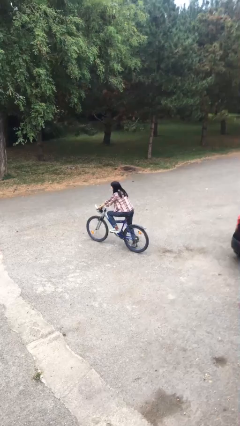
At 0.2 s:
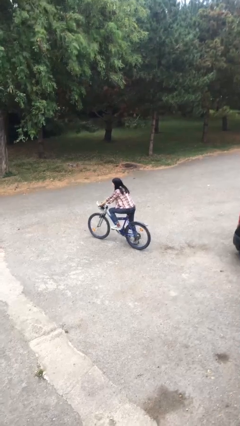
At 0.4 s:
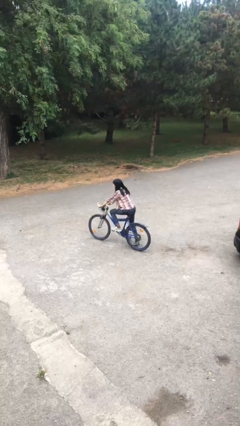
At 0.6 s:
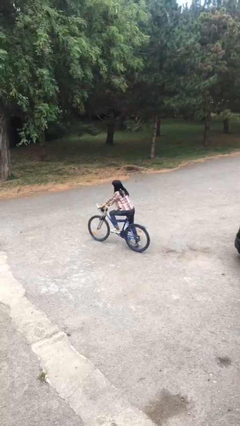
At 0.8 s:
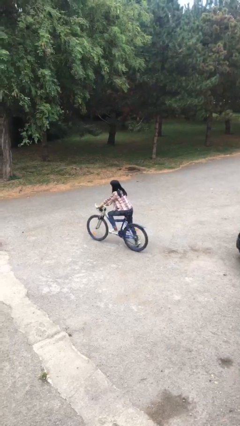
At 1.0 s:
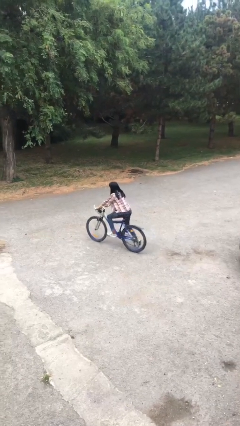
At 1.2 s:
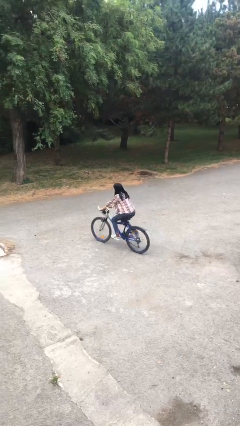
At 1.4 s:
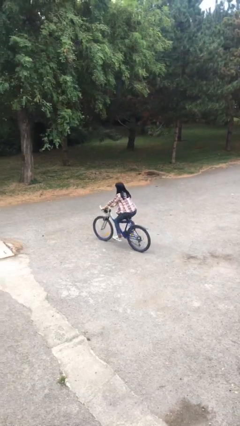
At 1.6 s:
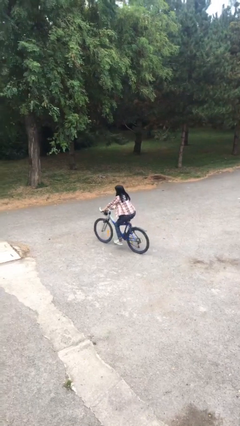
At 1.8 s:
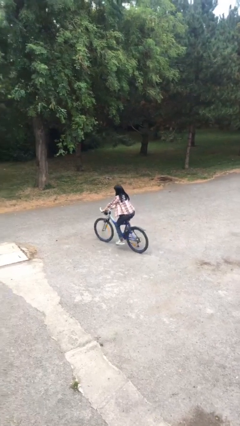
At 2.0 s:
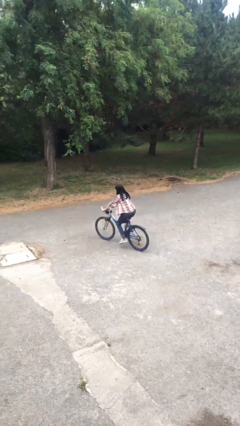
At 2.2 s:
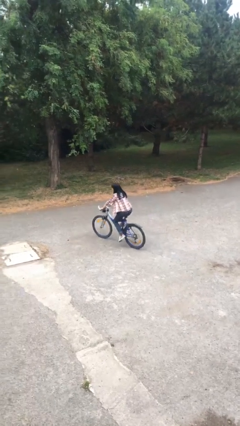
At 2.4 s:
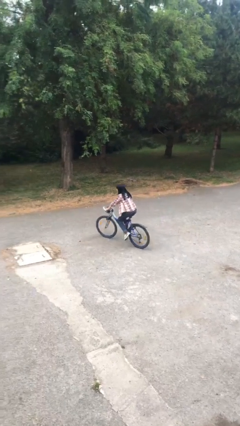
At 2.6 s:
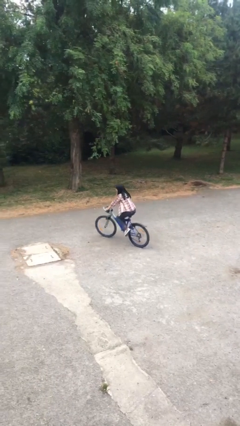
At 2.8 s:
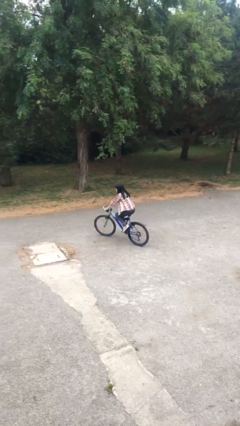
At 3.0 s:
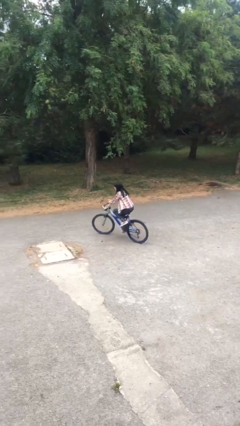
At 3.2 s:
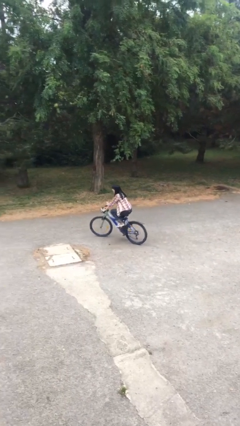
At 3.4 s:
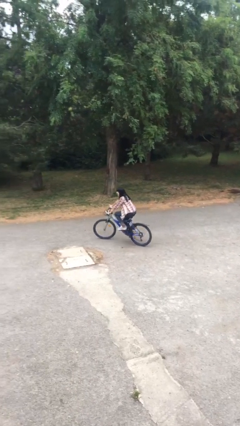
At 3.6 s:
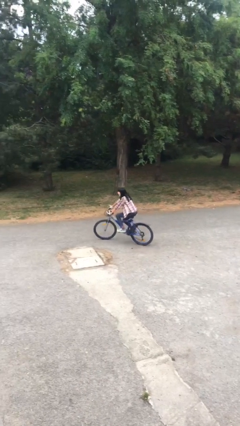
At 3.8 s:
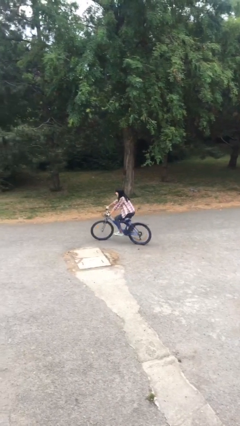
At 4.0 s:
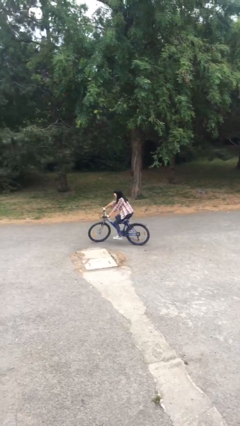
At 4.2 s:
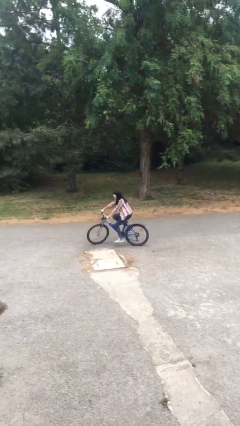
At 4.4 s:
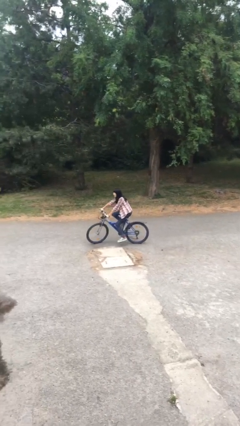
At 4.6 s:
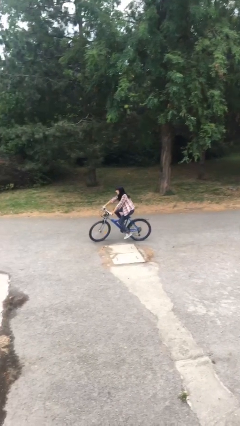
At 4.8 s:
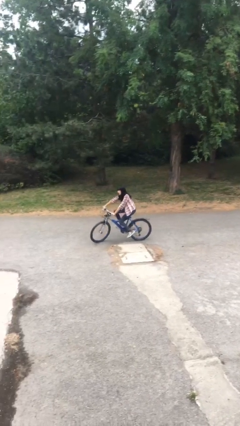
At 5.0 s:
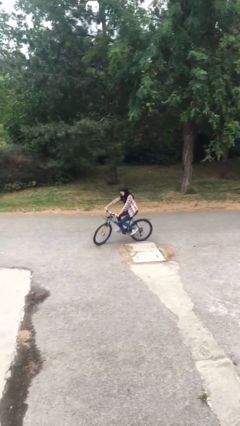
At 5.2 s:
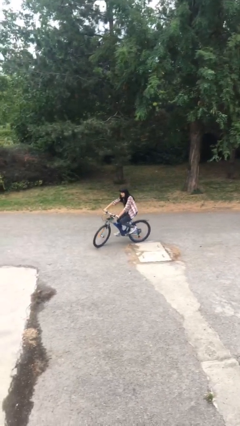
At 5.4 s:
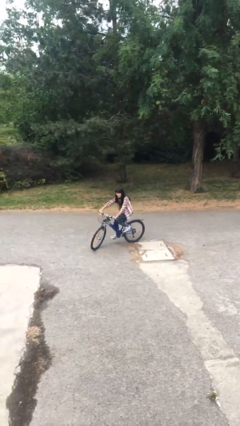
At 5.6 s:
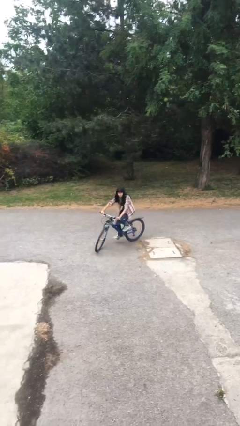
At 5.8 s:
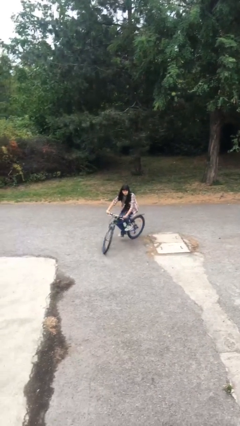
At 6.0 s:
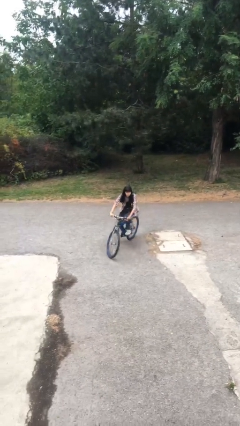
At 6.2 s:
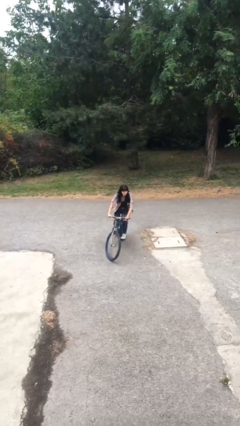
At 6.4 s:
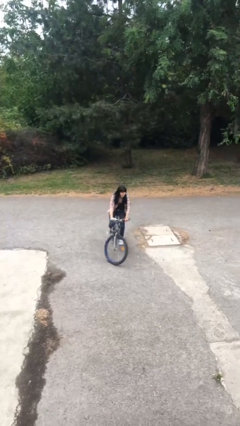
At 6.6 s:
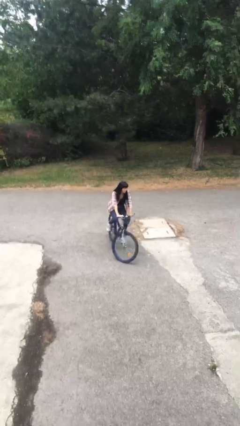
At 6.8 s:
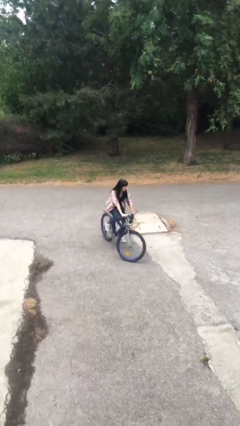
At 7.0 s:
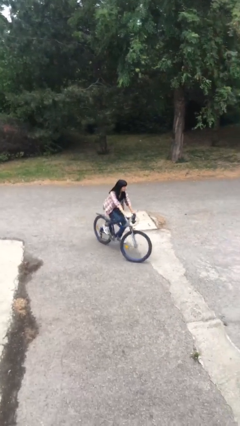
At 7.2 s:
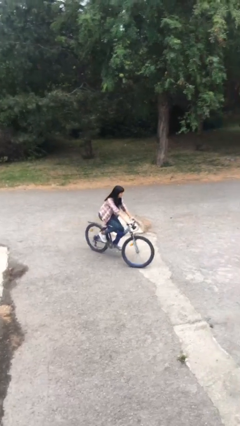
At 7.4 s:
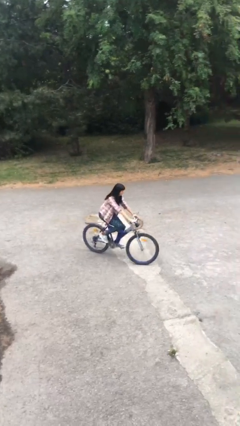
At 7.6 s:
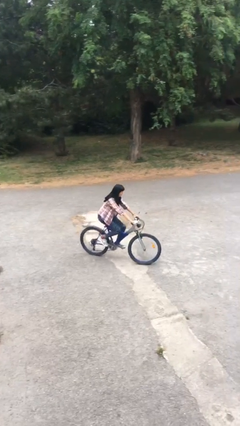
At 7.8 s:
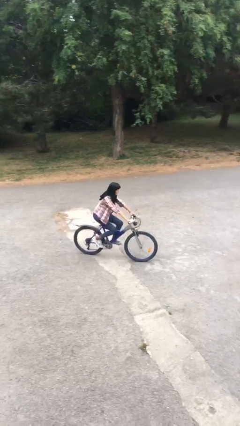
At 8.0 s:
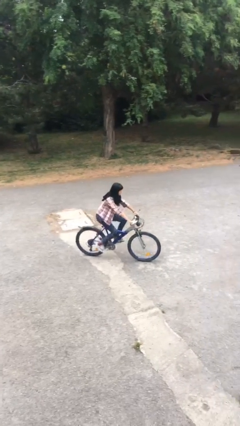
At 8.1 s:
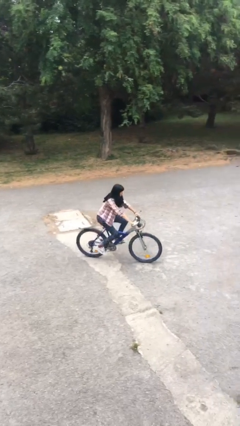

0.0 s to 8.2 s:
person rides bicycle

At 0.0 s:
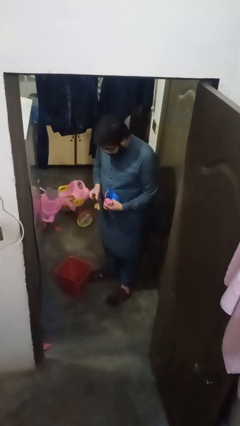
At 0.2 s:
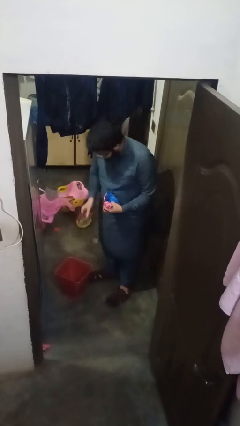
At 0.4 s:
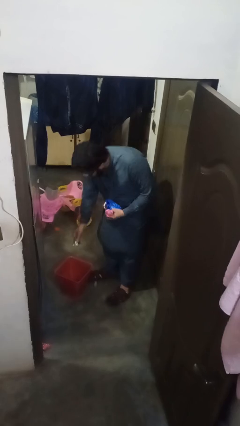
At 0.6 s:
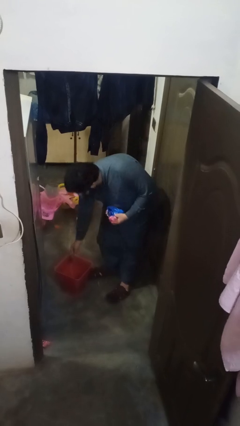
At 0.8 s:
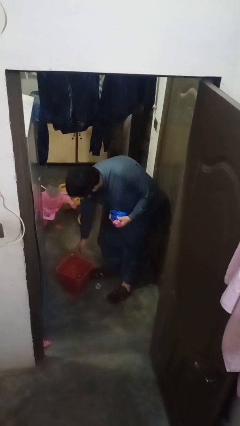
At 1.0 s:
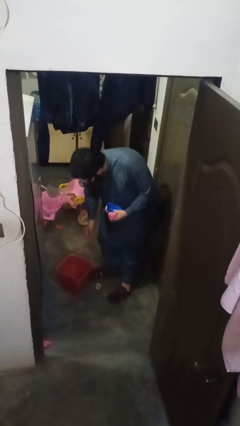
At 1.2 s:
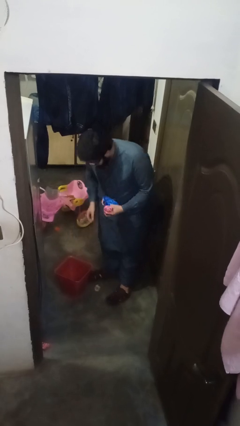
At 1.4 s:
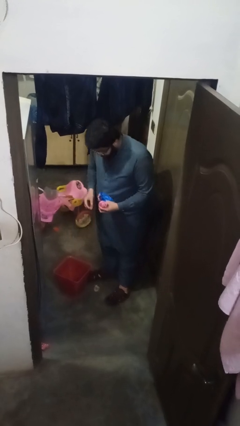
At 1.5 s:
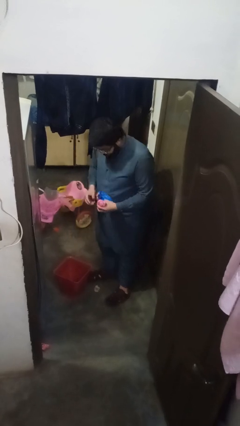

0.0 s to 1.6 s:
person discards trash

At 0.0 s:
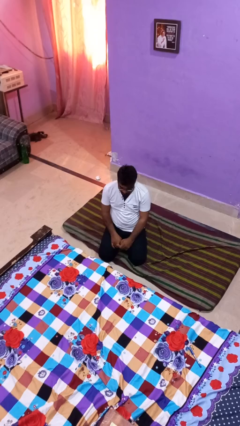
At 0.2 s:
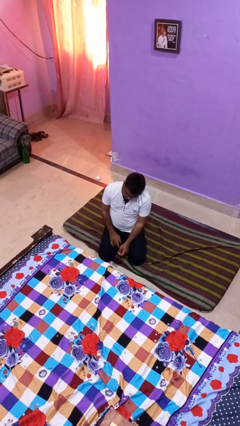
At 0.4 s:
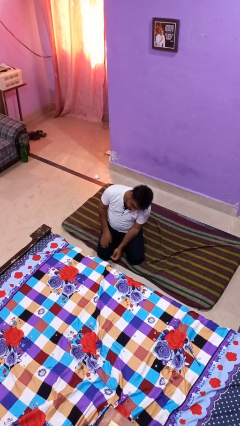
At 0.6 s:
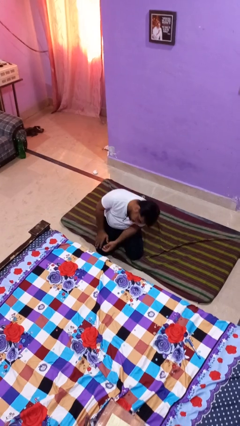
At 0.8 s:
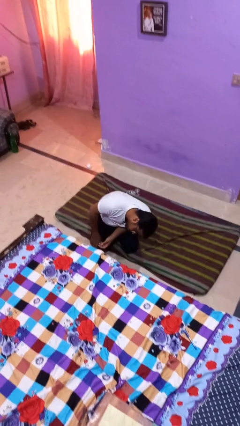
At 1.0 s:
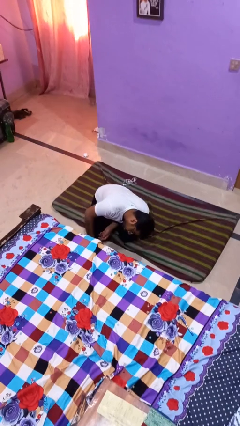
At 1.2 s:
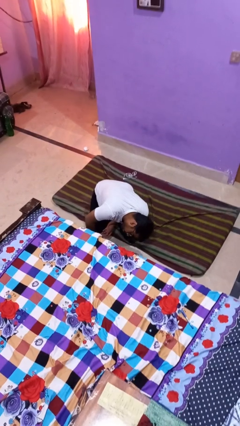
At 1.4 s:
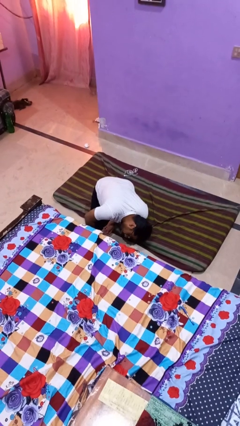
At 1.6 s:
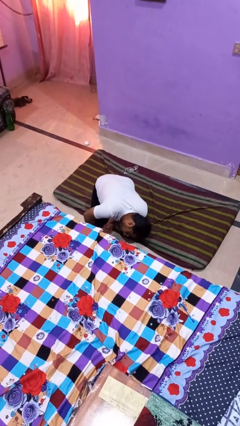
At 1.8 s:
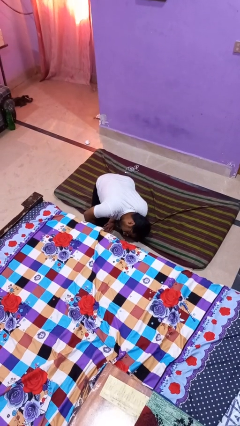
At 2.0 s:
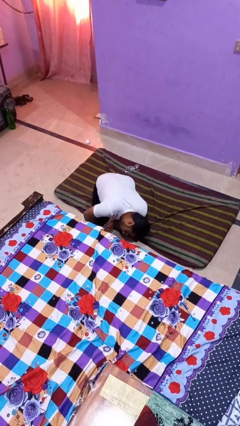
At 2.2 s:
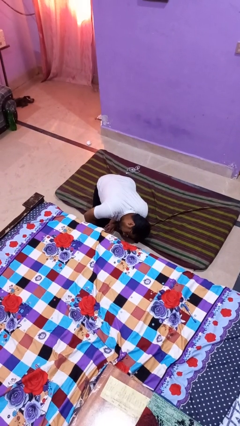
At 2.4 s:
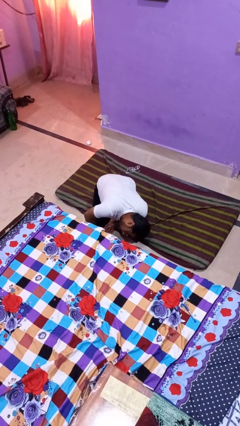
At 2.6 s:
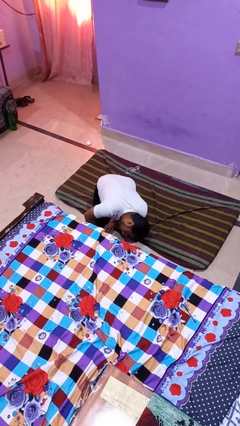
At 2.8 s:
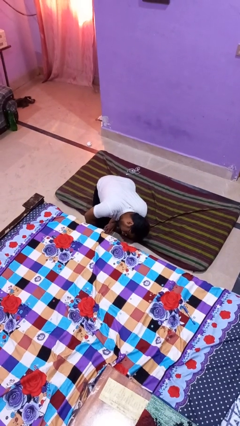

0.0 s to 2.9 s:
person searches under bed

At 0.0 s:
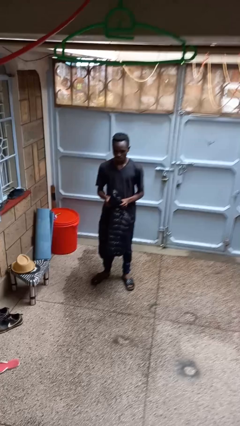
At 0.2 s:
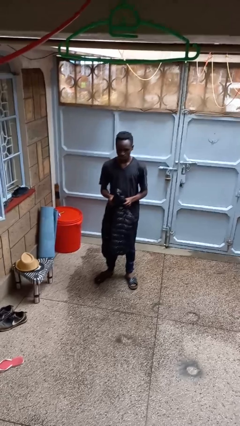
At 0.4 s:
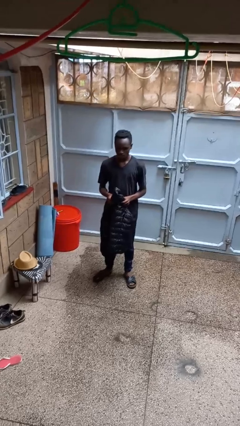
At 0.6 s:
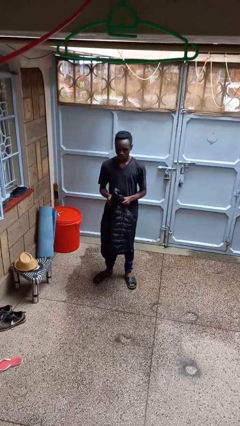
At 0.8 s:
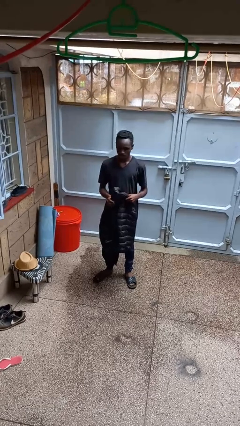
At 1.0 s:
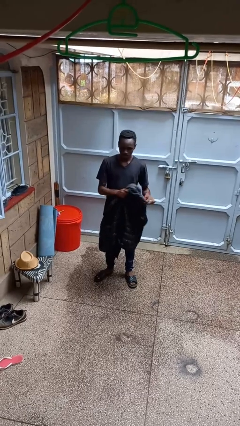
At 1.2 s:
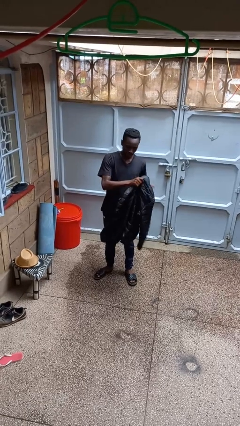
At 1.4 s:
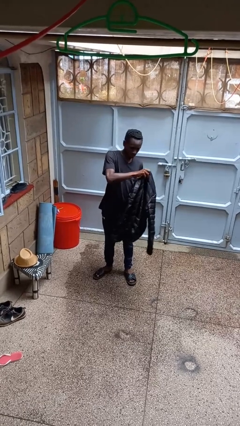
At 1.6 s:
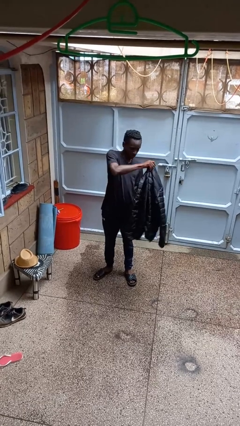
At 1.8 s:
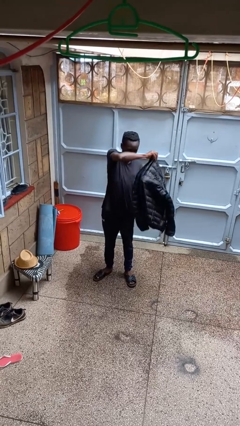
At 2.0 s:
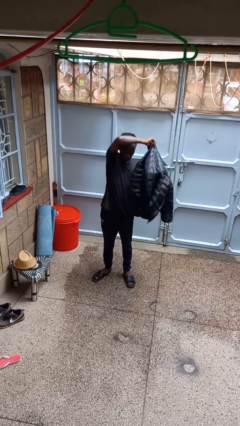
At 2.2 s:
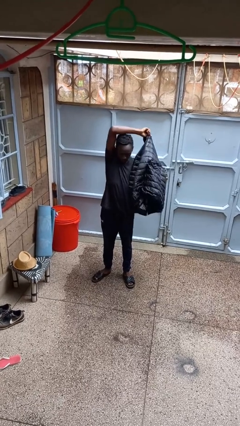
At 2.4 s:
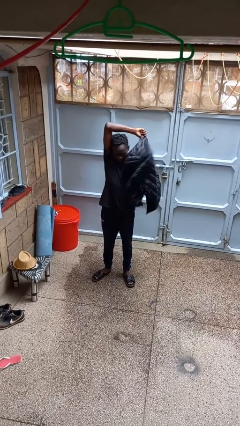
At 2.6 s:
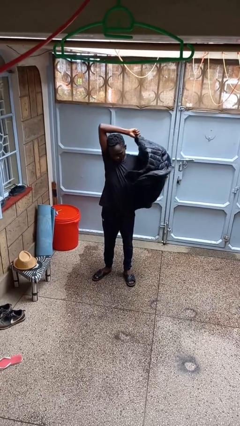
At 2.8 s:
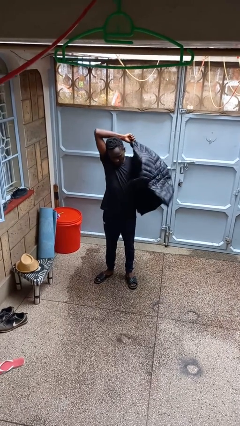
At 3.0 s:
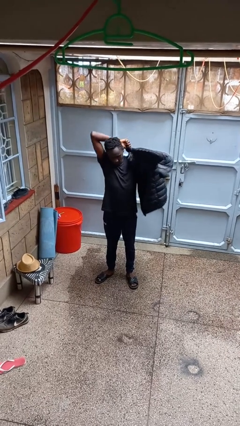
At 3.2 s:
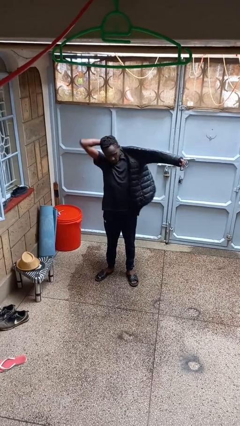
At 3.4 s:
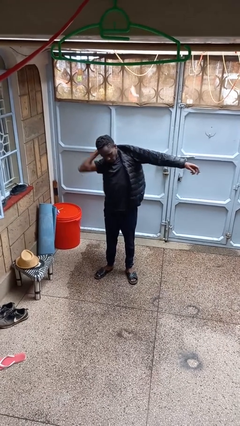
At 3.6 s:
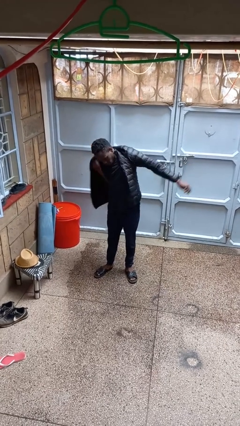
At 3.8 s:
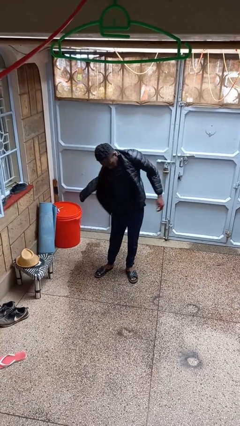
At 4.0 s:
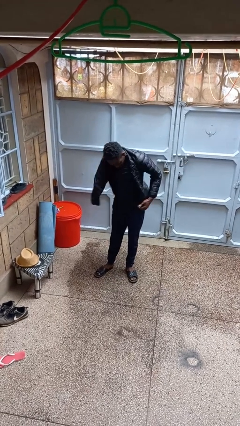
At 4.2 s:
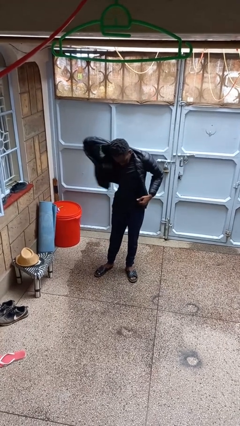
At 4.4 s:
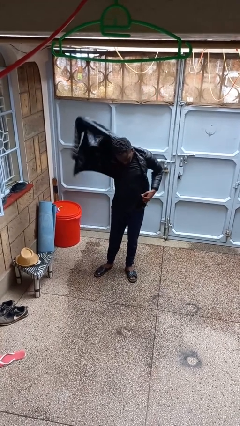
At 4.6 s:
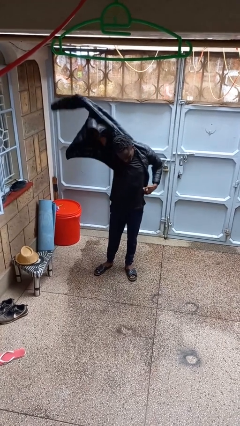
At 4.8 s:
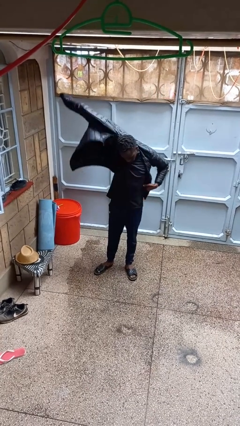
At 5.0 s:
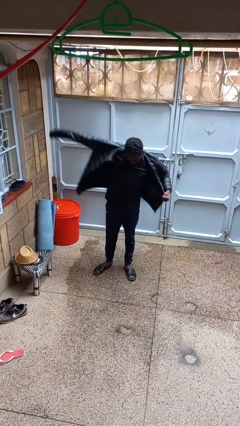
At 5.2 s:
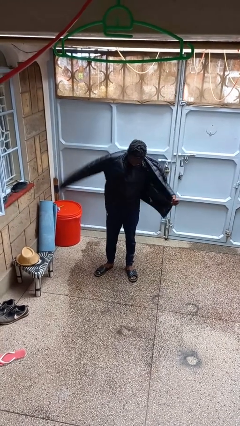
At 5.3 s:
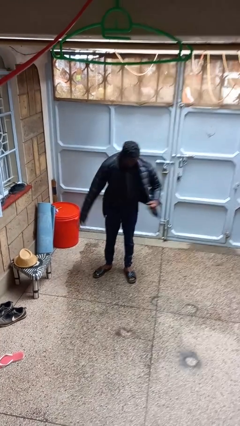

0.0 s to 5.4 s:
person puts on jacket
